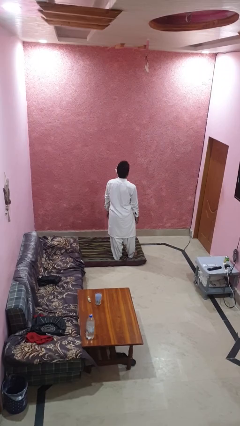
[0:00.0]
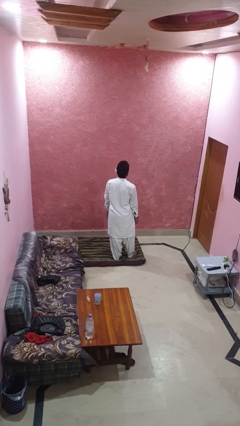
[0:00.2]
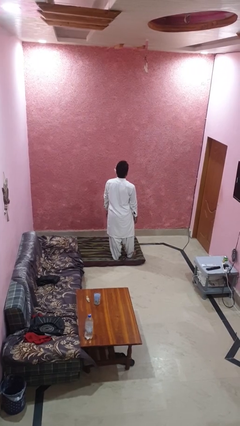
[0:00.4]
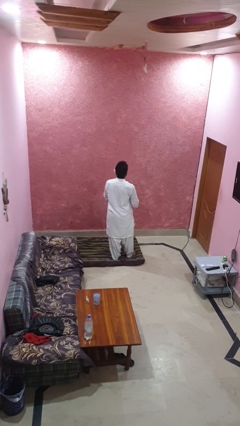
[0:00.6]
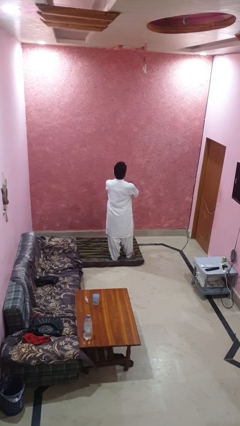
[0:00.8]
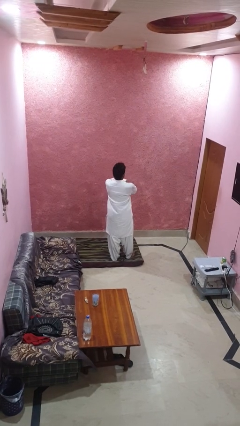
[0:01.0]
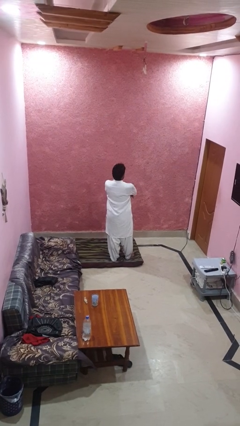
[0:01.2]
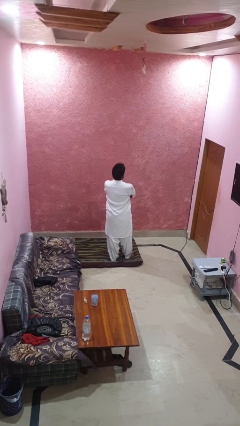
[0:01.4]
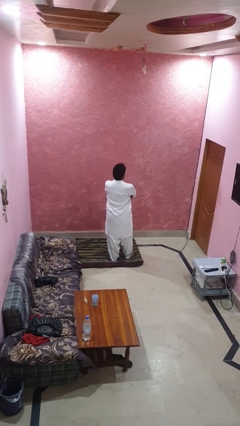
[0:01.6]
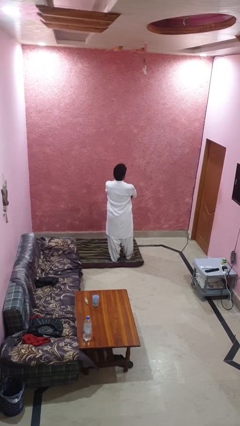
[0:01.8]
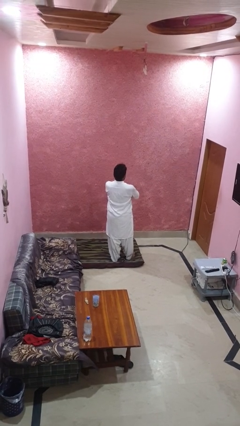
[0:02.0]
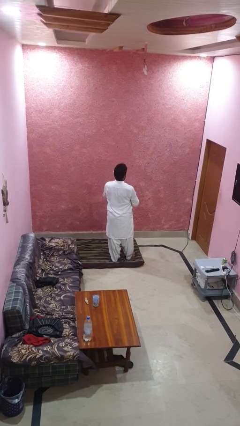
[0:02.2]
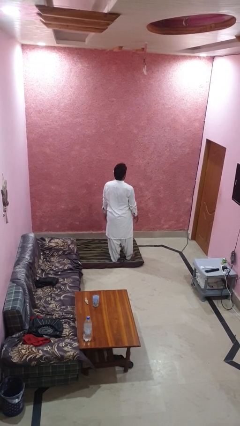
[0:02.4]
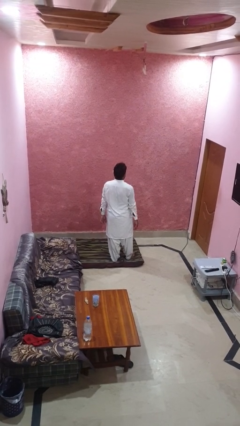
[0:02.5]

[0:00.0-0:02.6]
person crosses arms

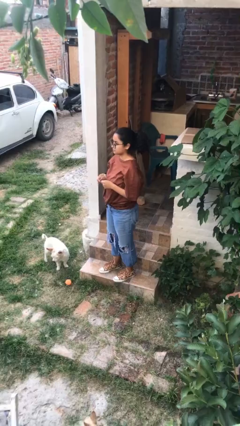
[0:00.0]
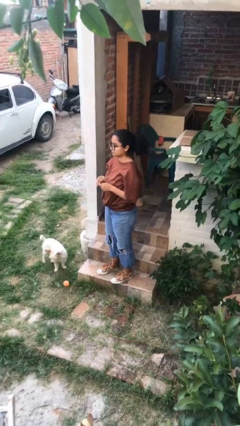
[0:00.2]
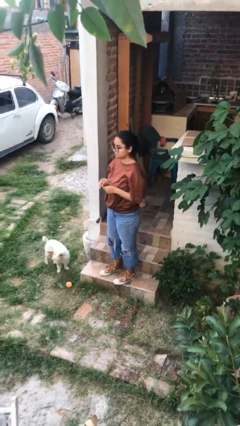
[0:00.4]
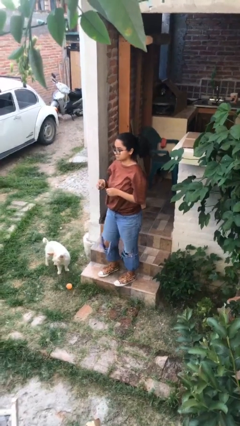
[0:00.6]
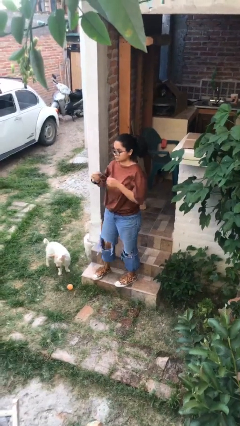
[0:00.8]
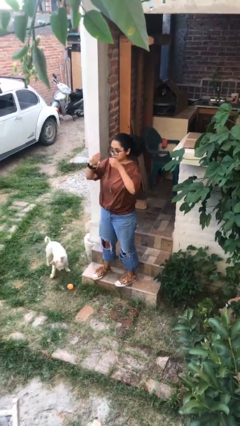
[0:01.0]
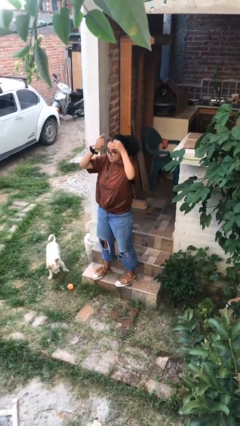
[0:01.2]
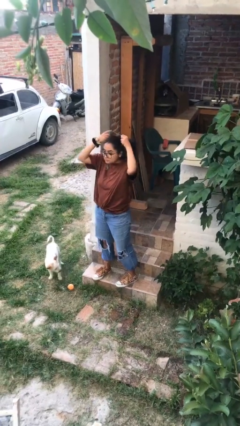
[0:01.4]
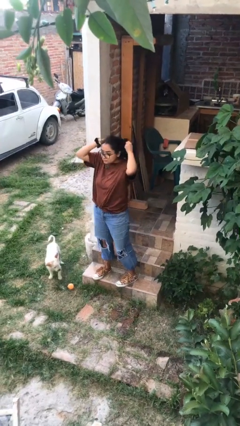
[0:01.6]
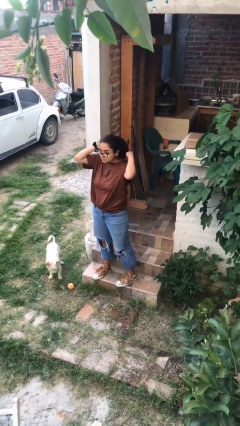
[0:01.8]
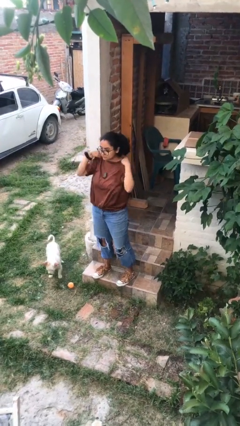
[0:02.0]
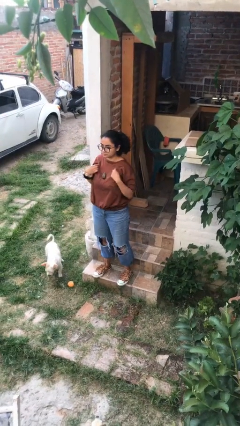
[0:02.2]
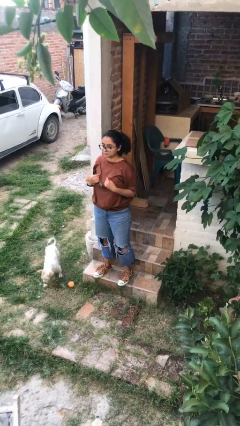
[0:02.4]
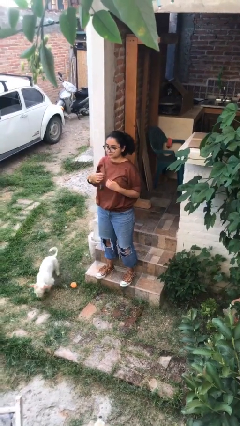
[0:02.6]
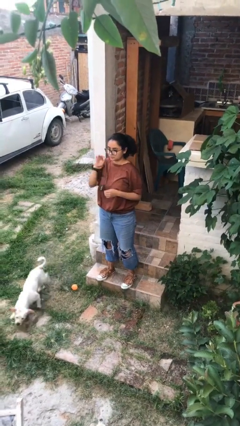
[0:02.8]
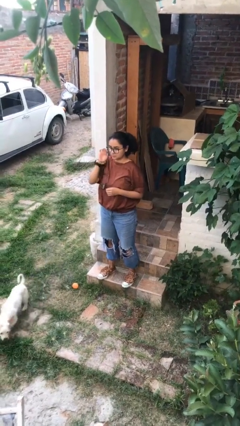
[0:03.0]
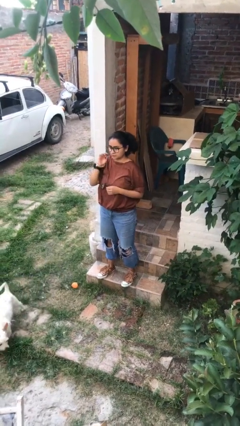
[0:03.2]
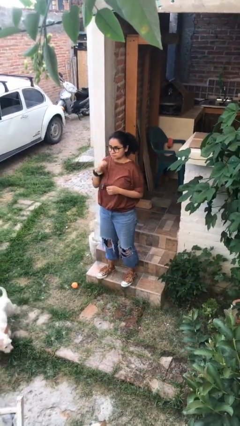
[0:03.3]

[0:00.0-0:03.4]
person puts on necklace

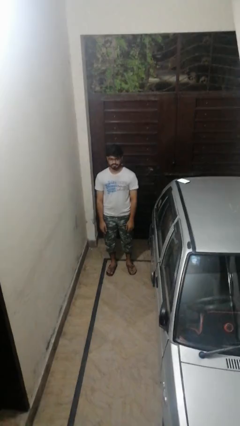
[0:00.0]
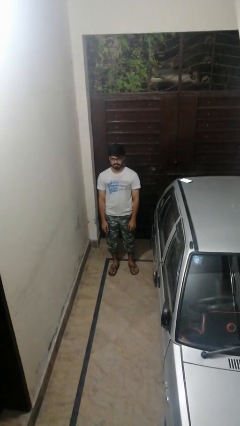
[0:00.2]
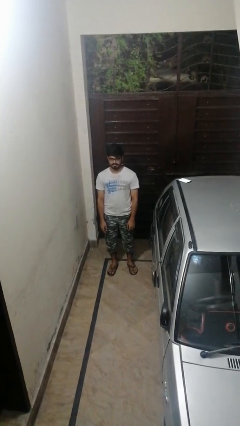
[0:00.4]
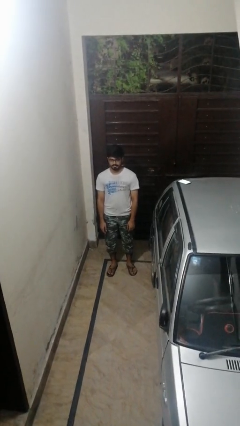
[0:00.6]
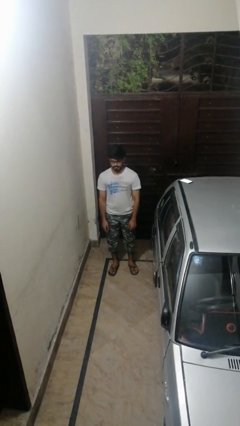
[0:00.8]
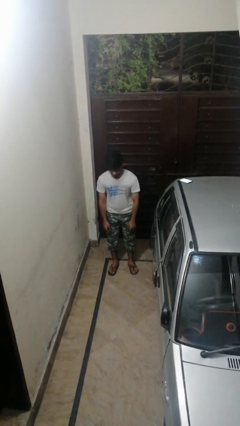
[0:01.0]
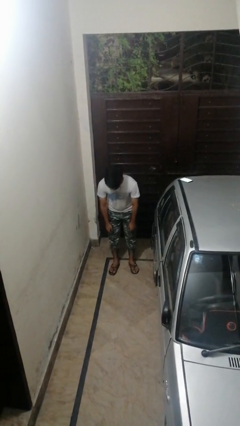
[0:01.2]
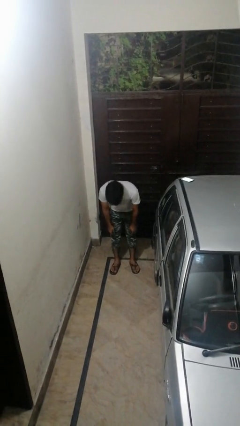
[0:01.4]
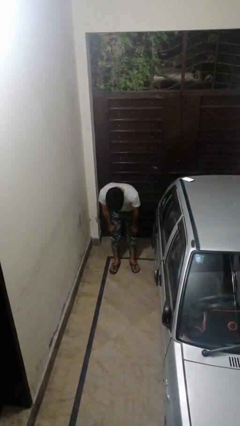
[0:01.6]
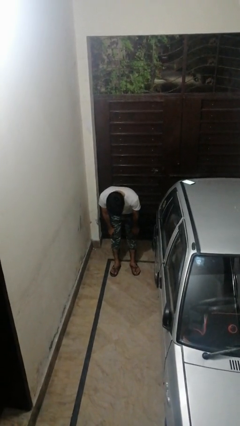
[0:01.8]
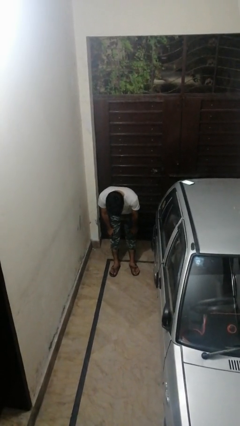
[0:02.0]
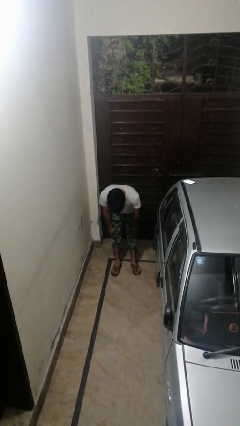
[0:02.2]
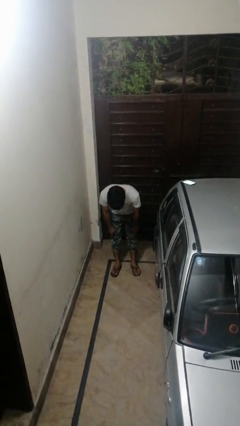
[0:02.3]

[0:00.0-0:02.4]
person bows

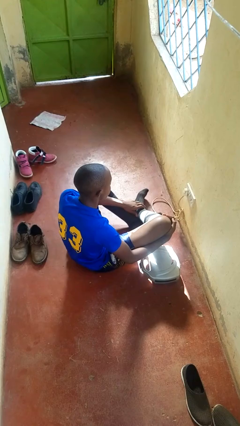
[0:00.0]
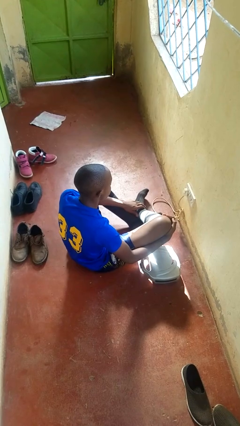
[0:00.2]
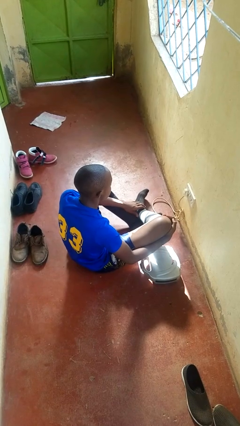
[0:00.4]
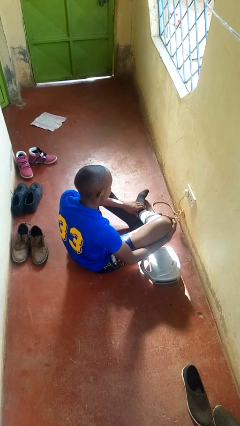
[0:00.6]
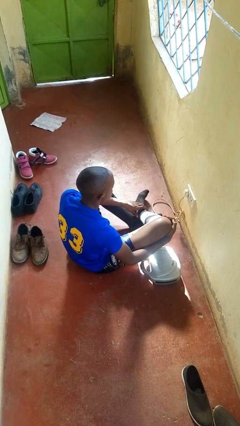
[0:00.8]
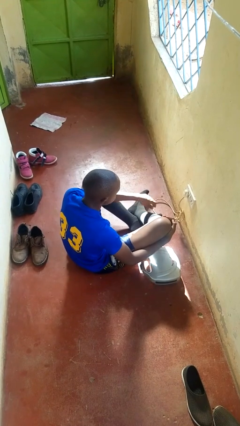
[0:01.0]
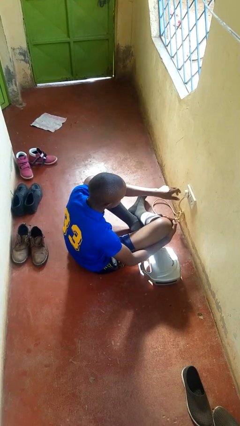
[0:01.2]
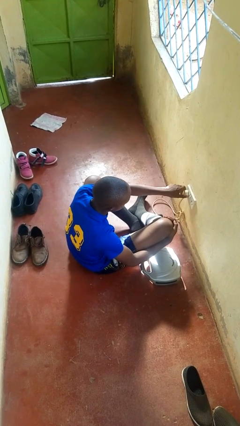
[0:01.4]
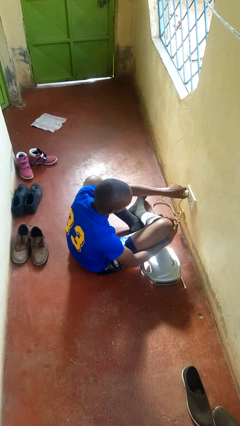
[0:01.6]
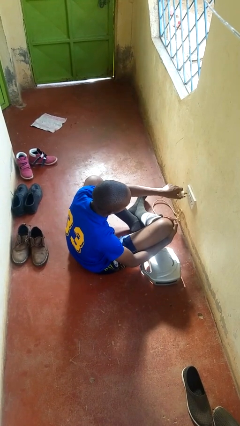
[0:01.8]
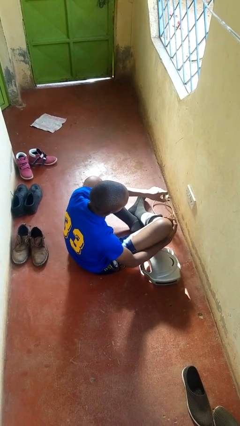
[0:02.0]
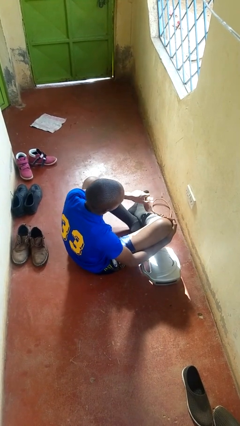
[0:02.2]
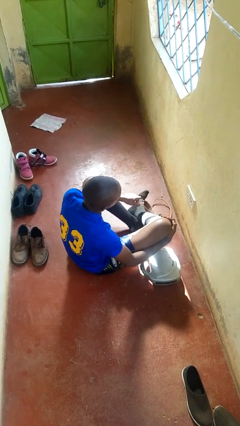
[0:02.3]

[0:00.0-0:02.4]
person unplugs from electrical socket

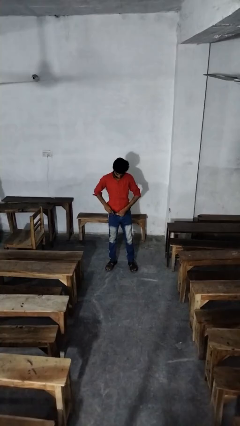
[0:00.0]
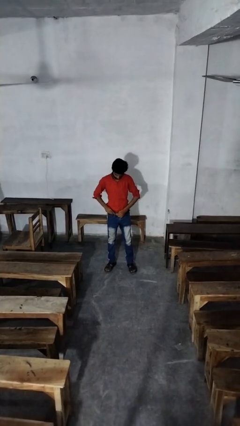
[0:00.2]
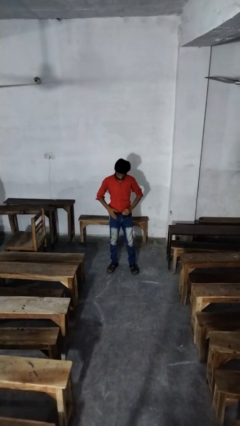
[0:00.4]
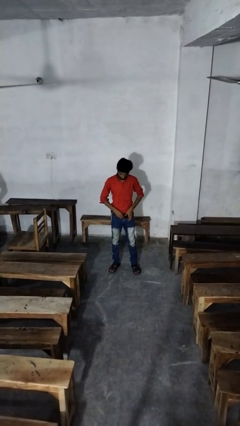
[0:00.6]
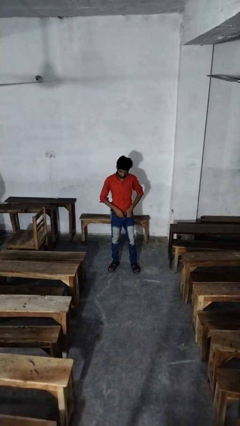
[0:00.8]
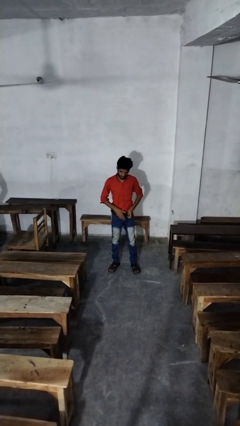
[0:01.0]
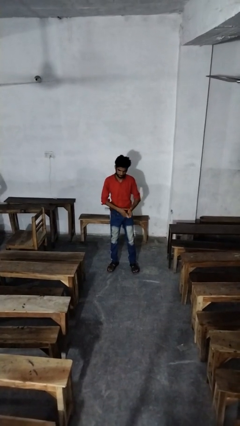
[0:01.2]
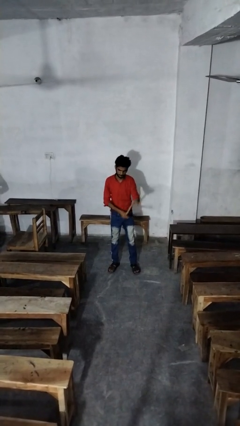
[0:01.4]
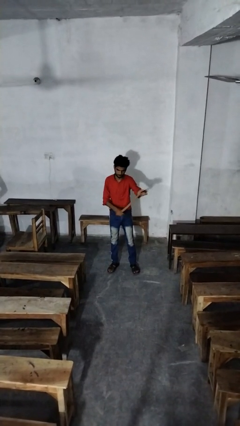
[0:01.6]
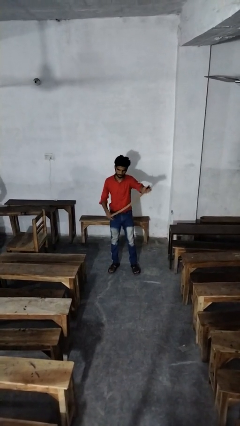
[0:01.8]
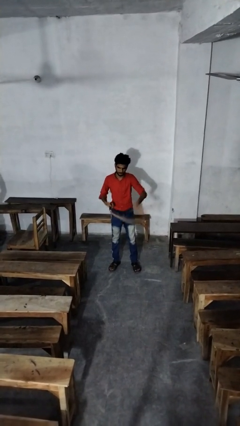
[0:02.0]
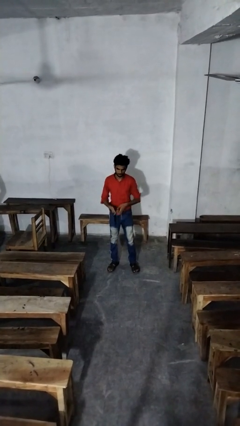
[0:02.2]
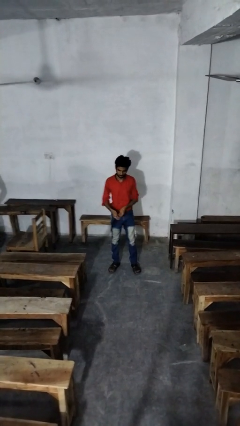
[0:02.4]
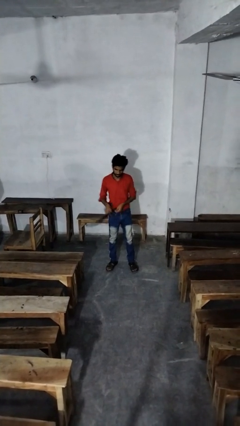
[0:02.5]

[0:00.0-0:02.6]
person takes off belt

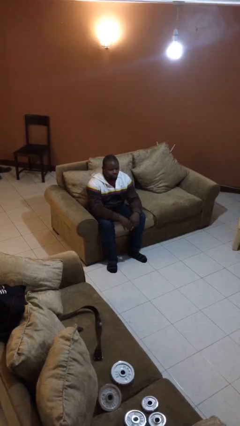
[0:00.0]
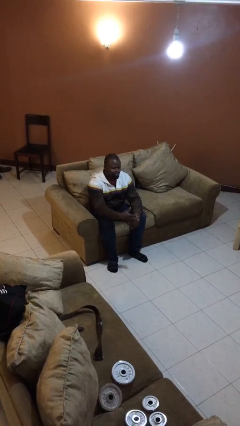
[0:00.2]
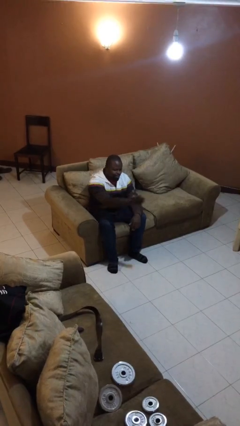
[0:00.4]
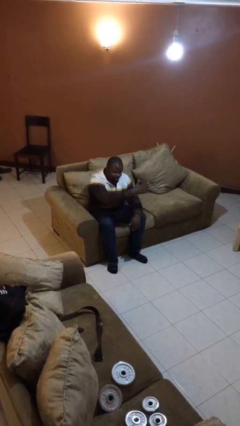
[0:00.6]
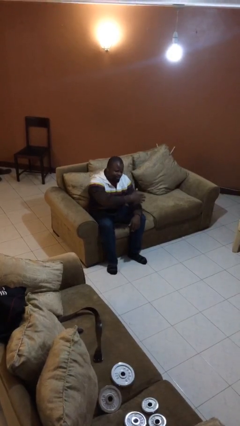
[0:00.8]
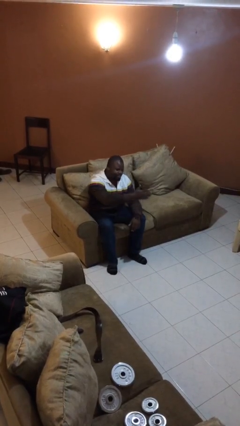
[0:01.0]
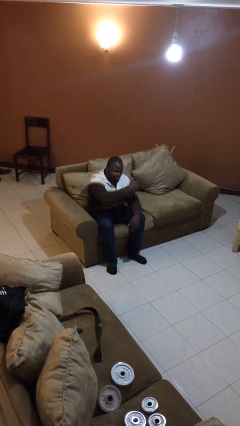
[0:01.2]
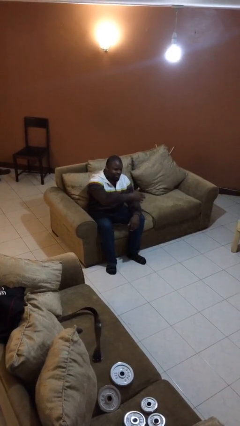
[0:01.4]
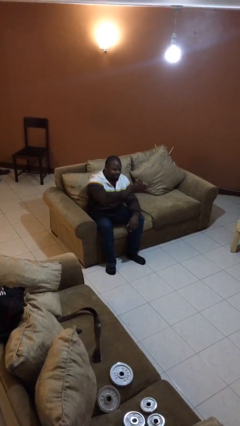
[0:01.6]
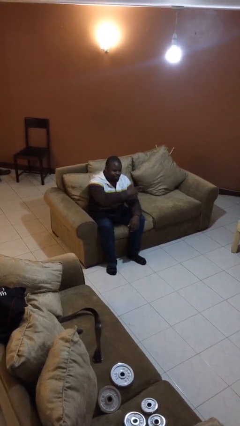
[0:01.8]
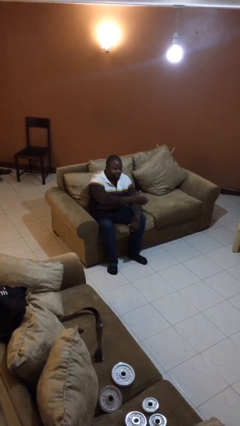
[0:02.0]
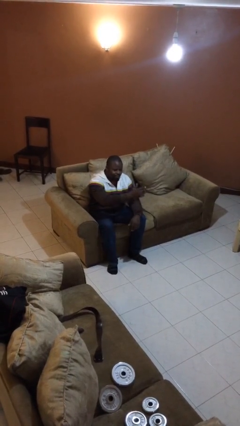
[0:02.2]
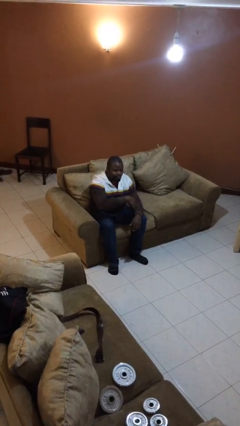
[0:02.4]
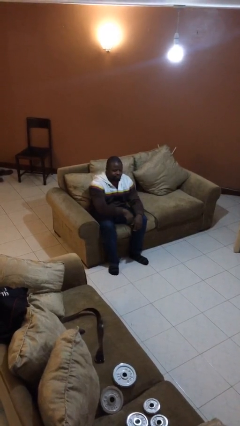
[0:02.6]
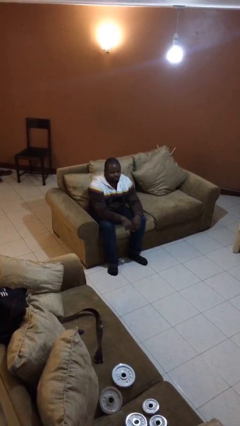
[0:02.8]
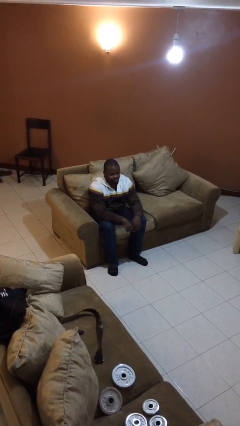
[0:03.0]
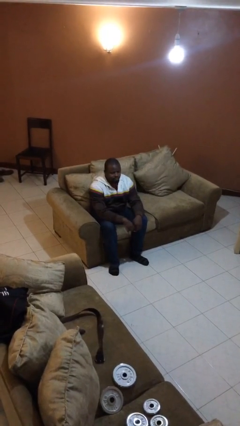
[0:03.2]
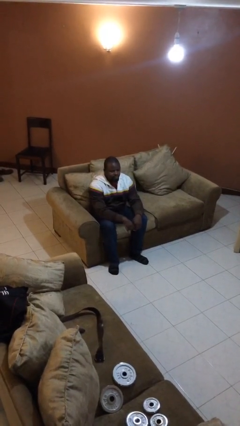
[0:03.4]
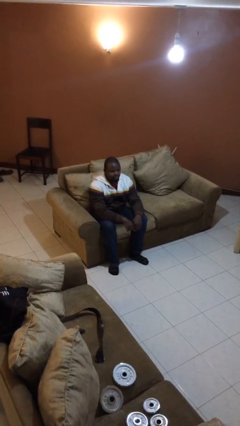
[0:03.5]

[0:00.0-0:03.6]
person gestures come here
